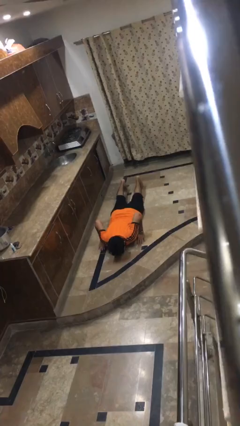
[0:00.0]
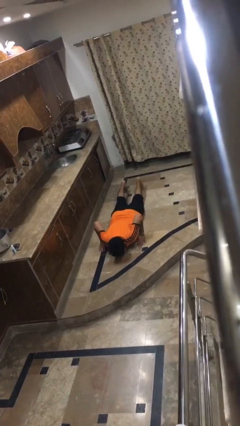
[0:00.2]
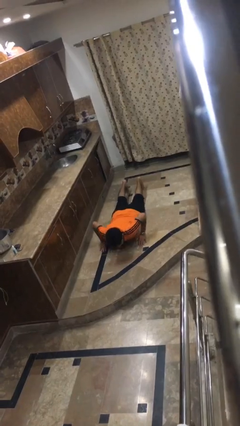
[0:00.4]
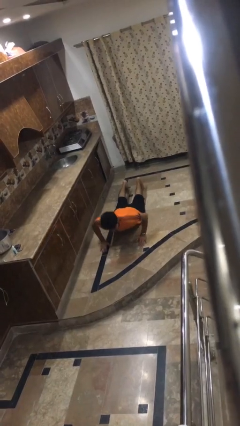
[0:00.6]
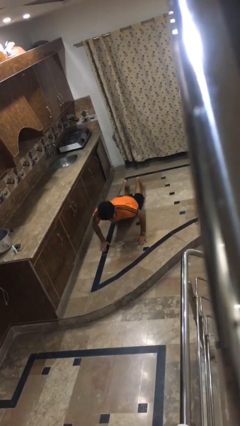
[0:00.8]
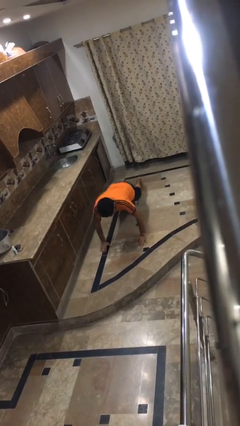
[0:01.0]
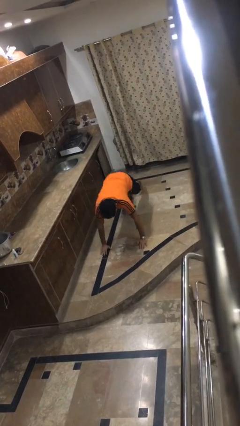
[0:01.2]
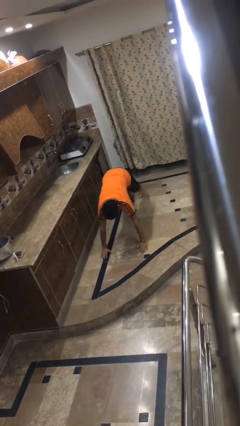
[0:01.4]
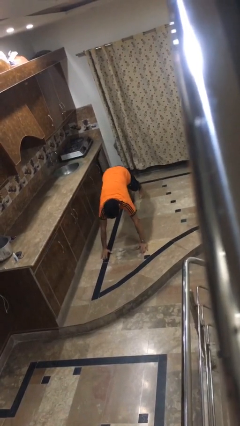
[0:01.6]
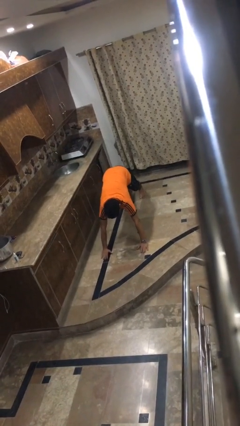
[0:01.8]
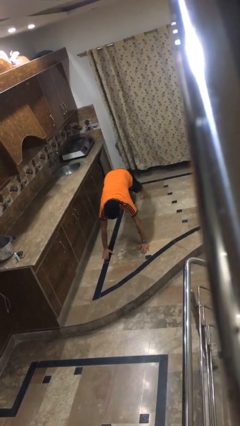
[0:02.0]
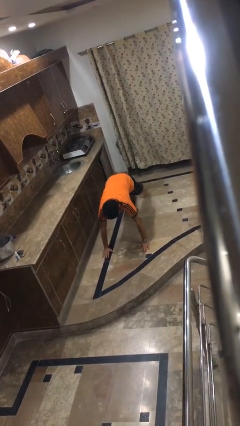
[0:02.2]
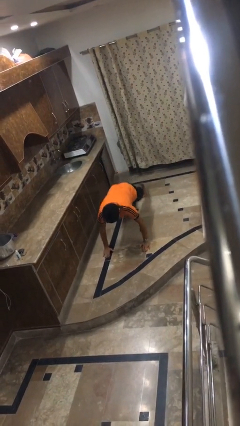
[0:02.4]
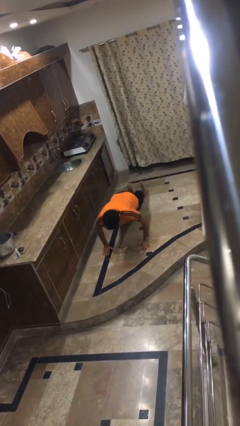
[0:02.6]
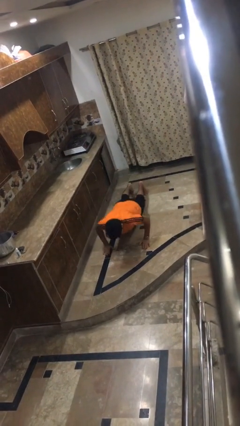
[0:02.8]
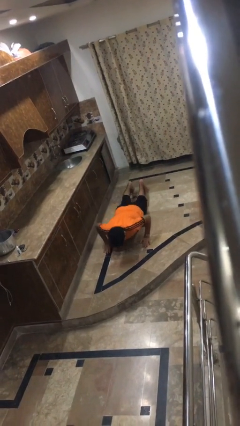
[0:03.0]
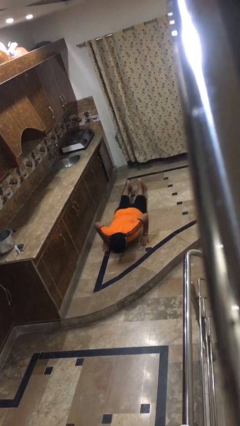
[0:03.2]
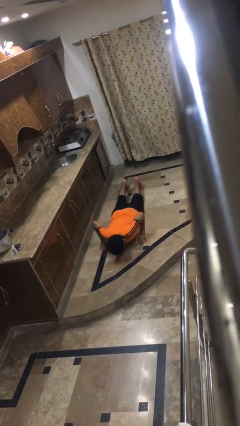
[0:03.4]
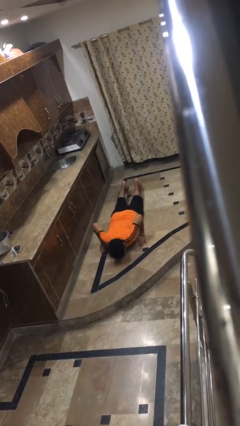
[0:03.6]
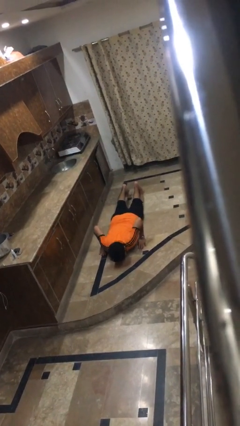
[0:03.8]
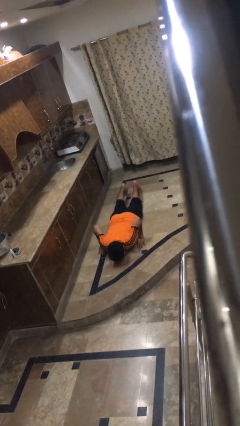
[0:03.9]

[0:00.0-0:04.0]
person exercises with pushup

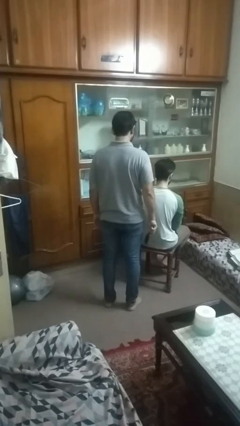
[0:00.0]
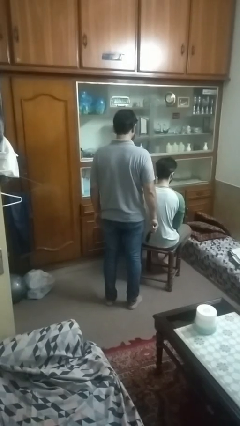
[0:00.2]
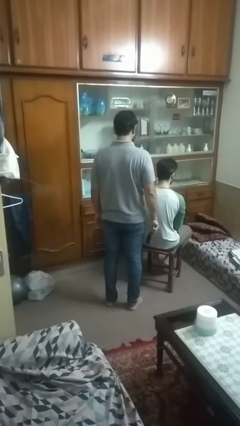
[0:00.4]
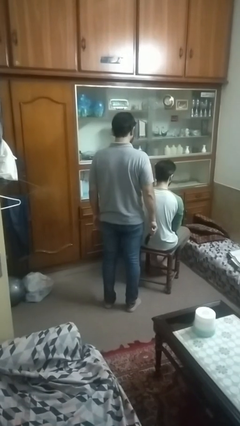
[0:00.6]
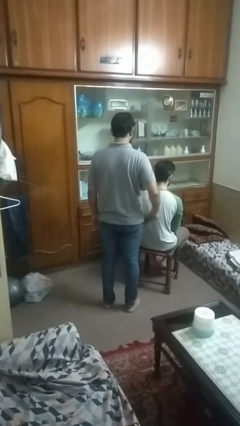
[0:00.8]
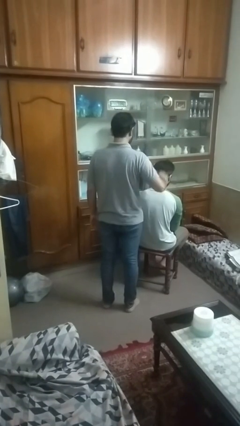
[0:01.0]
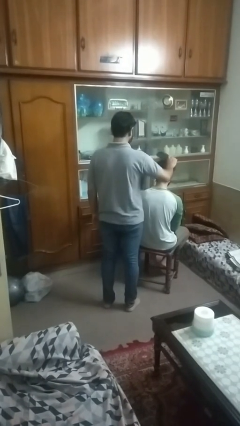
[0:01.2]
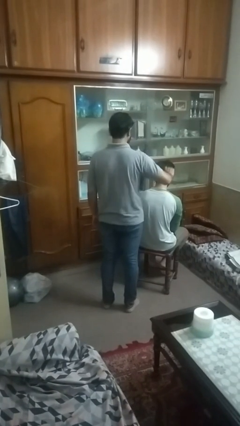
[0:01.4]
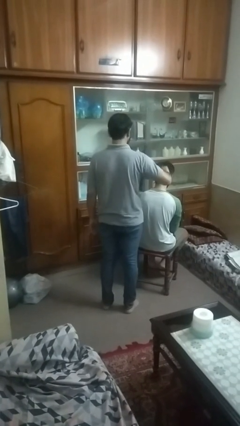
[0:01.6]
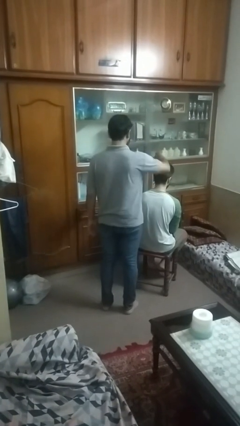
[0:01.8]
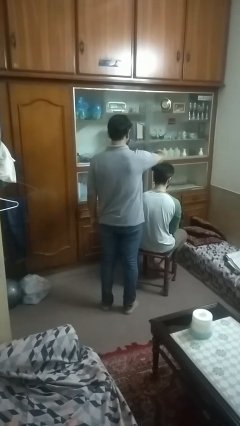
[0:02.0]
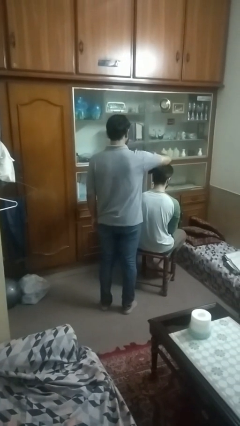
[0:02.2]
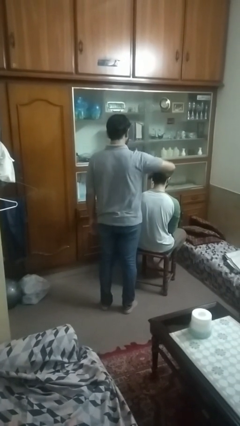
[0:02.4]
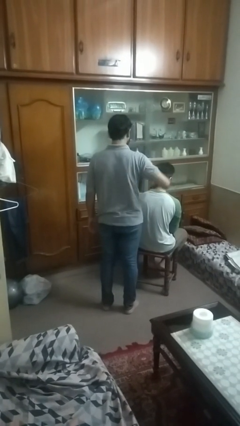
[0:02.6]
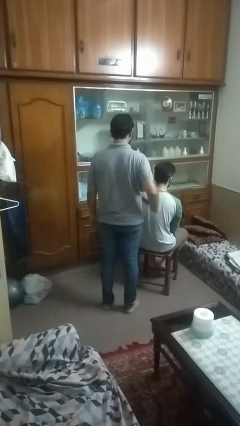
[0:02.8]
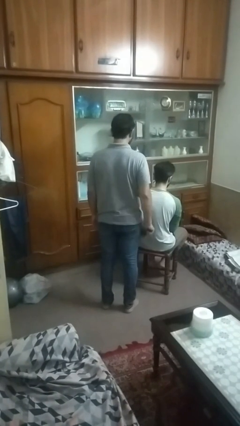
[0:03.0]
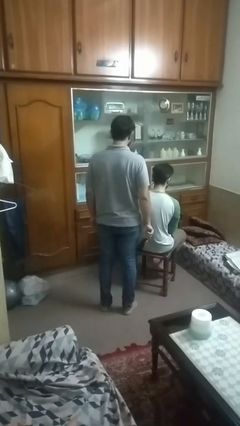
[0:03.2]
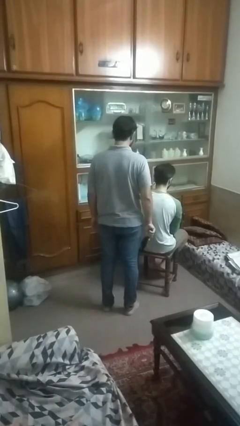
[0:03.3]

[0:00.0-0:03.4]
person brushes hair of person

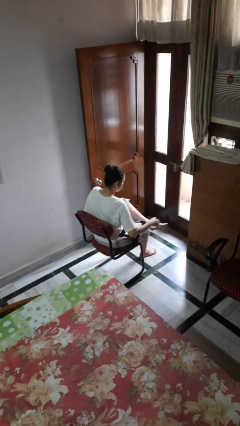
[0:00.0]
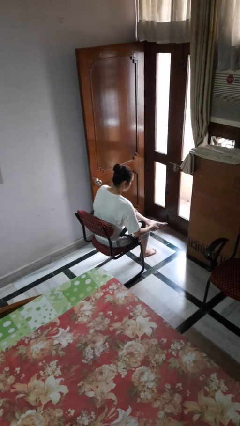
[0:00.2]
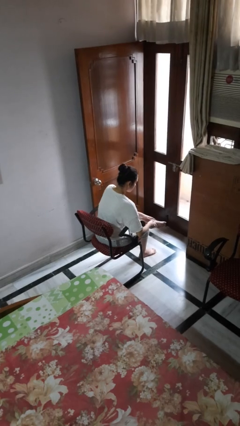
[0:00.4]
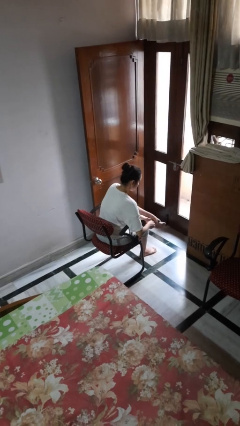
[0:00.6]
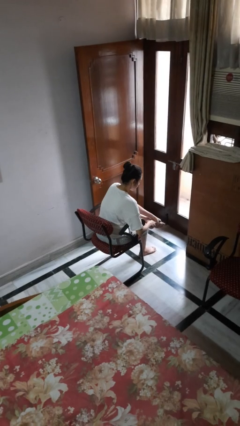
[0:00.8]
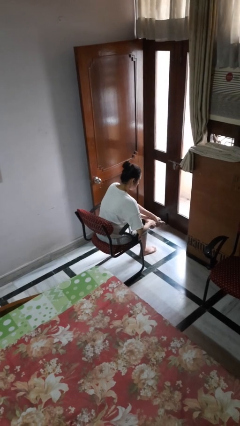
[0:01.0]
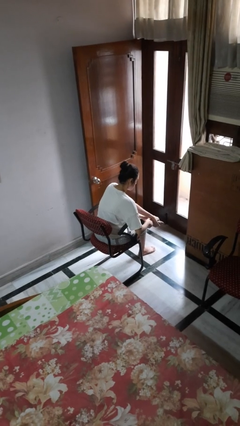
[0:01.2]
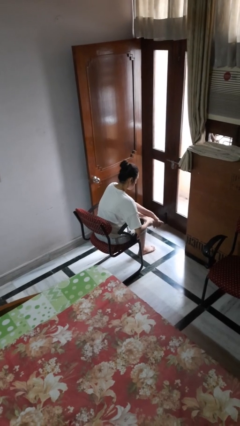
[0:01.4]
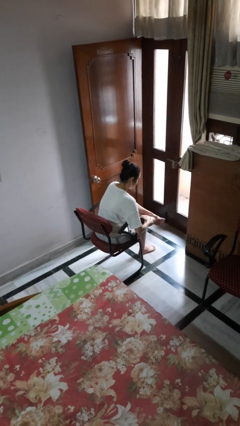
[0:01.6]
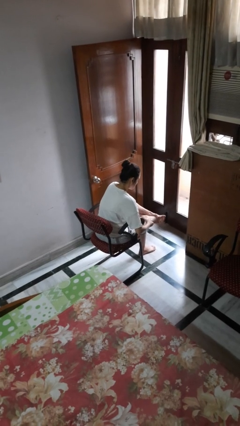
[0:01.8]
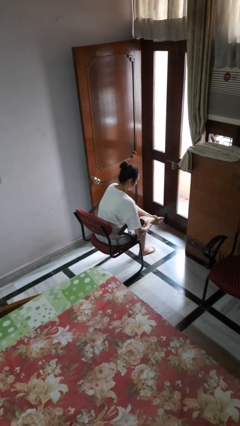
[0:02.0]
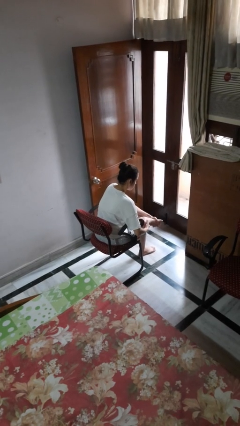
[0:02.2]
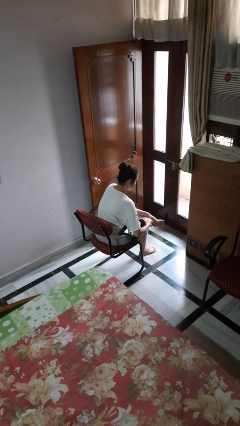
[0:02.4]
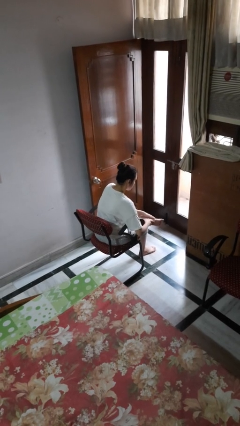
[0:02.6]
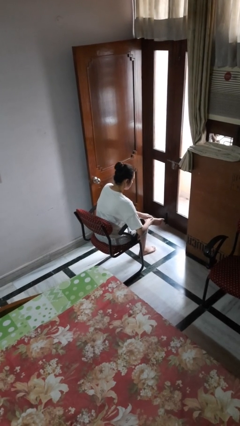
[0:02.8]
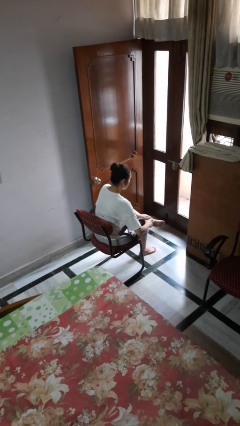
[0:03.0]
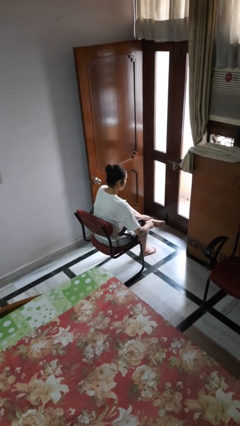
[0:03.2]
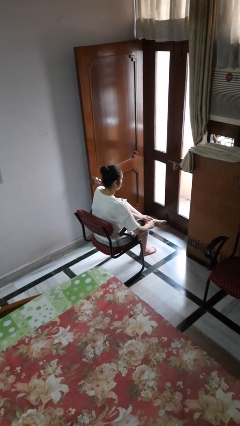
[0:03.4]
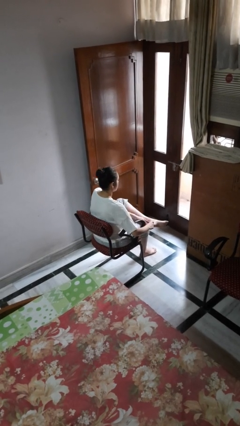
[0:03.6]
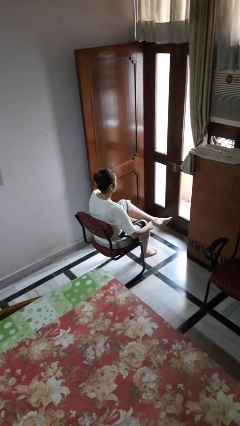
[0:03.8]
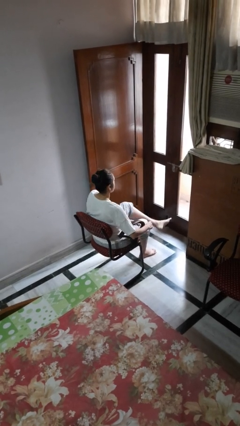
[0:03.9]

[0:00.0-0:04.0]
person rubs foot

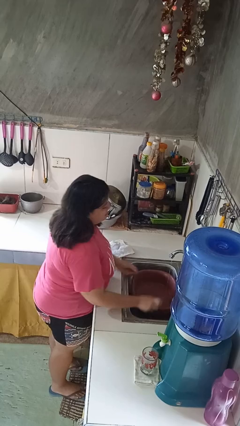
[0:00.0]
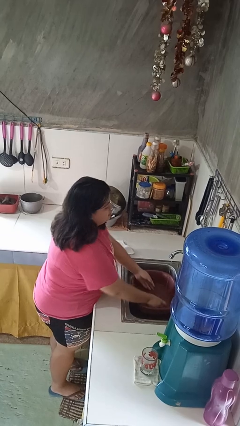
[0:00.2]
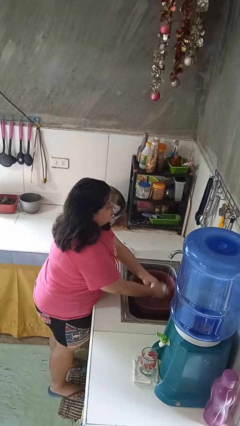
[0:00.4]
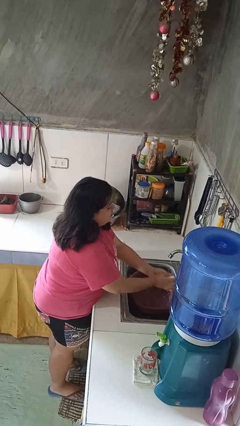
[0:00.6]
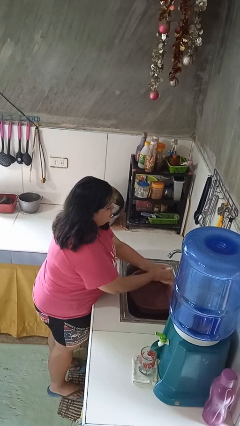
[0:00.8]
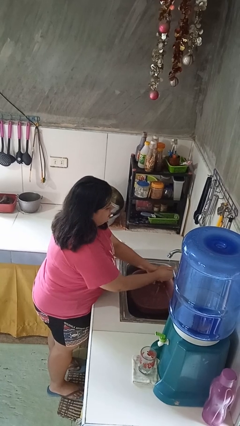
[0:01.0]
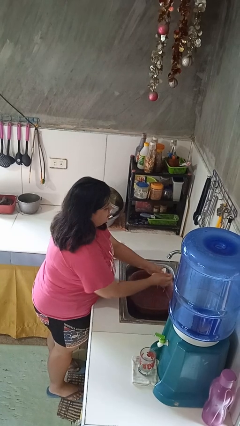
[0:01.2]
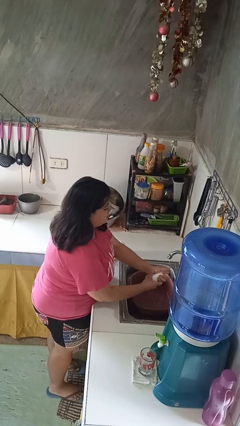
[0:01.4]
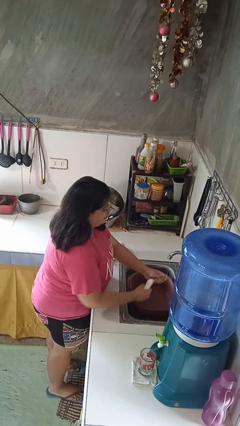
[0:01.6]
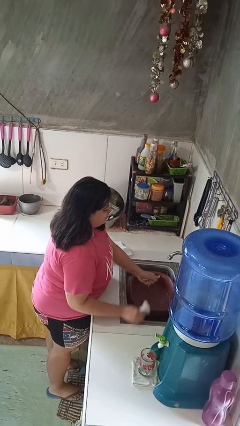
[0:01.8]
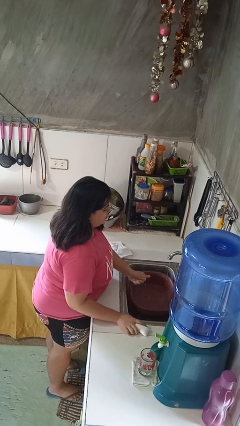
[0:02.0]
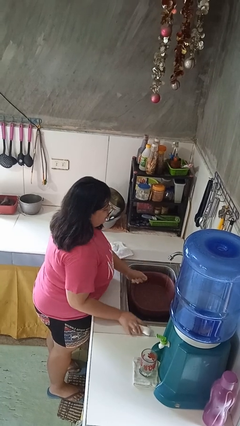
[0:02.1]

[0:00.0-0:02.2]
person washes hands

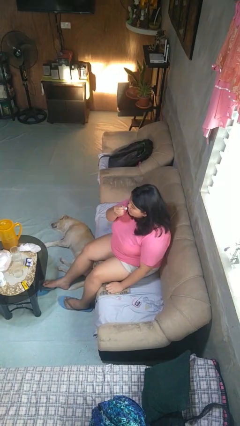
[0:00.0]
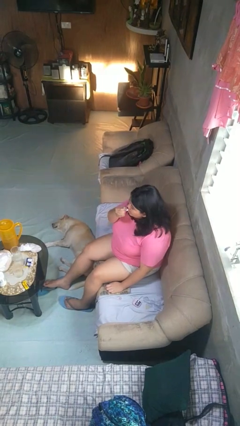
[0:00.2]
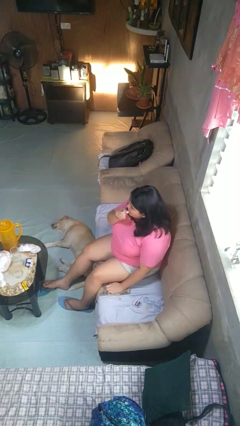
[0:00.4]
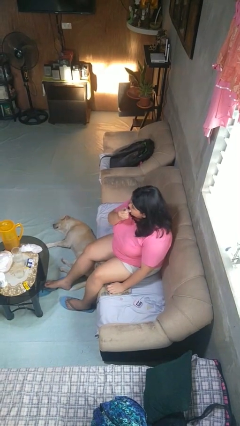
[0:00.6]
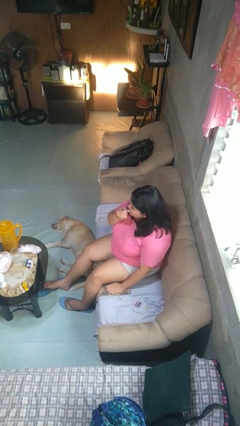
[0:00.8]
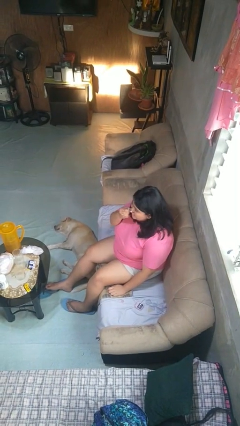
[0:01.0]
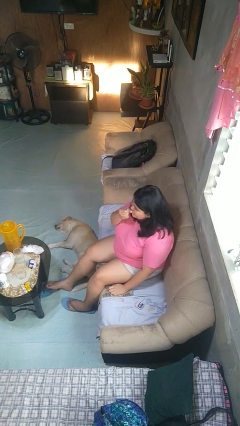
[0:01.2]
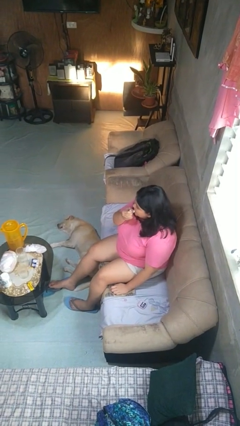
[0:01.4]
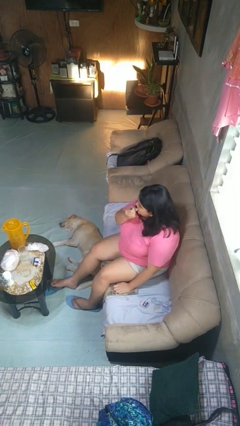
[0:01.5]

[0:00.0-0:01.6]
person applies lip makeup

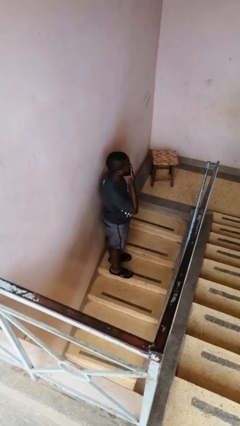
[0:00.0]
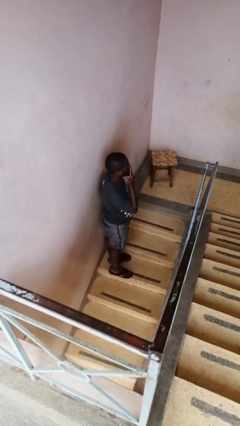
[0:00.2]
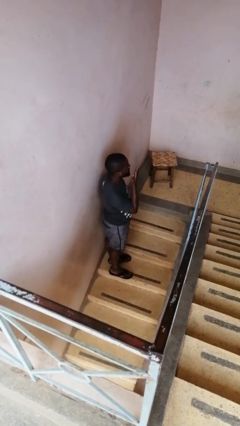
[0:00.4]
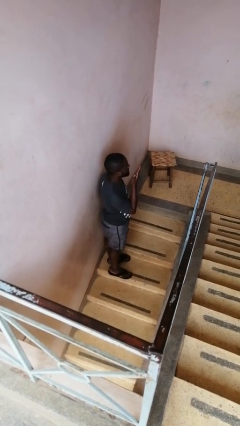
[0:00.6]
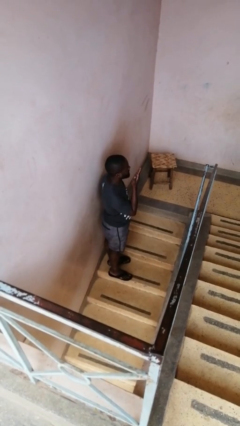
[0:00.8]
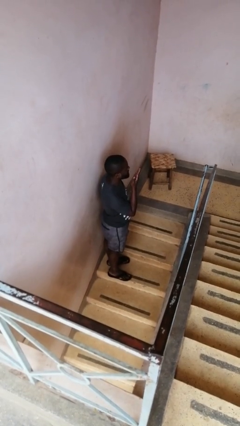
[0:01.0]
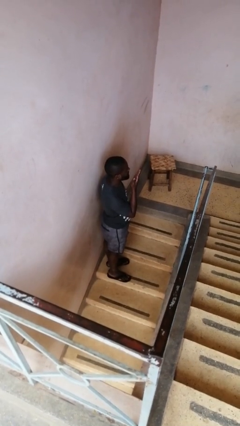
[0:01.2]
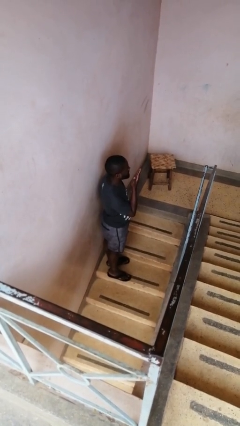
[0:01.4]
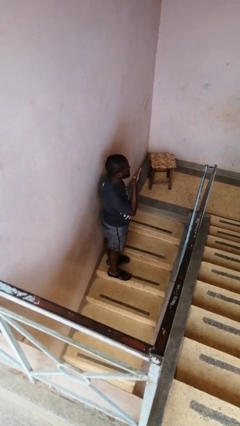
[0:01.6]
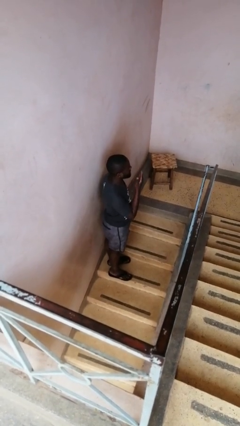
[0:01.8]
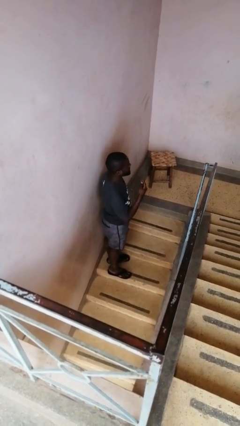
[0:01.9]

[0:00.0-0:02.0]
person gestures blow kiss
